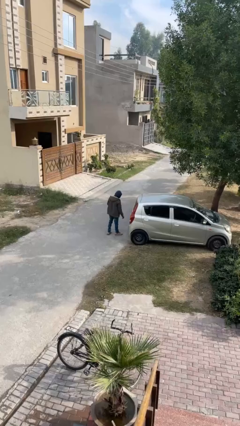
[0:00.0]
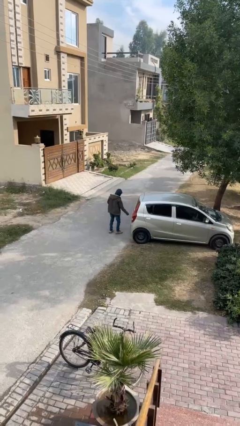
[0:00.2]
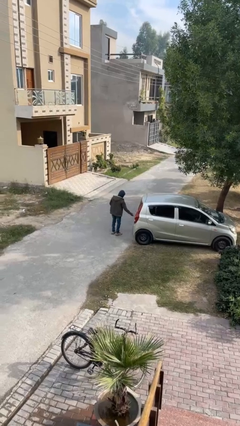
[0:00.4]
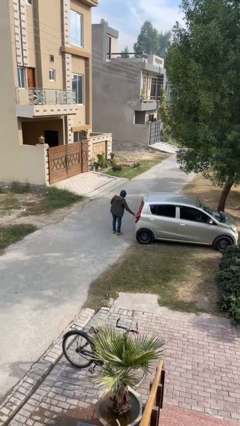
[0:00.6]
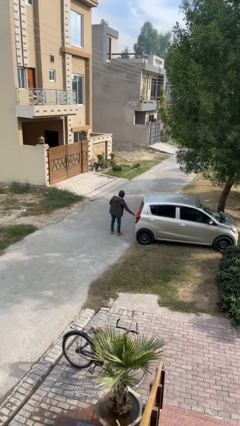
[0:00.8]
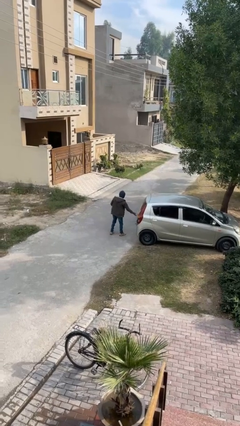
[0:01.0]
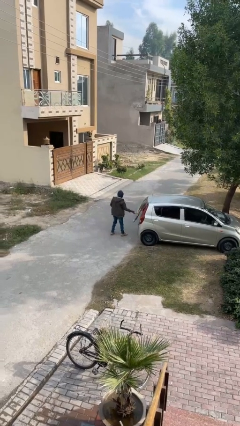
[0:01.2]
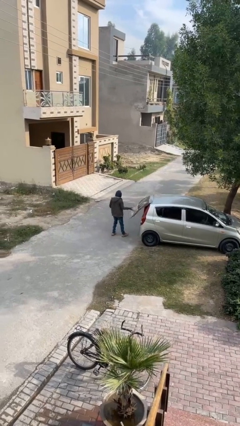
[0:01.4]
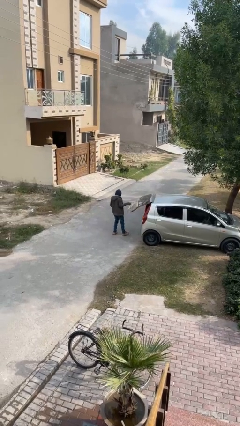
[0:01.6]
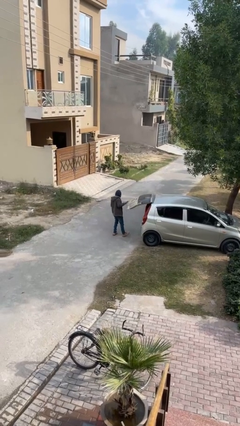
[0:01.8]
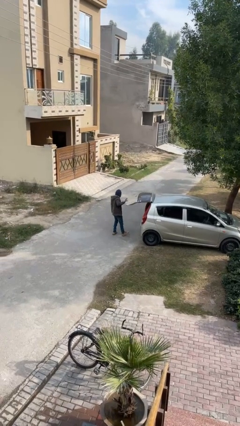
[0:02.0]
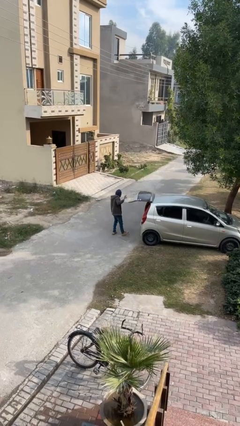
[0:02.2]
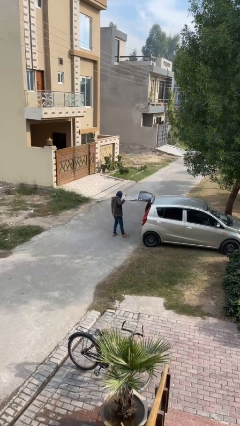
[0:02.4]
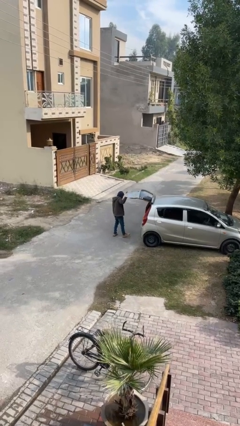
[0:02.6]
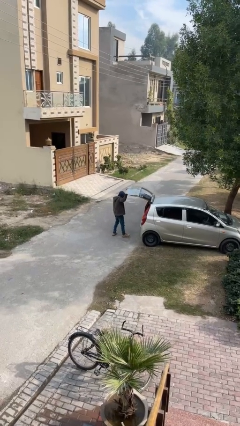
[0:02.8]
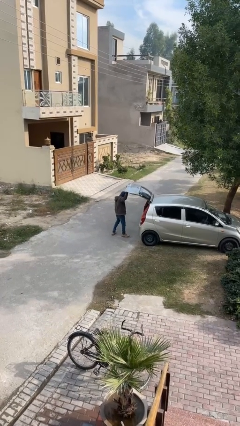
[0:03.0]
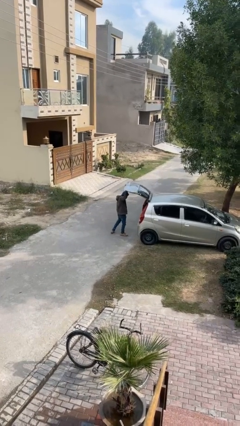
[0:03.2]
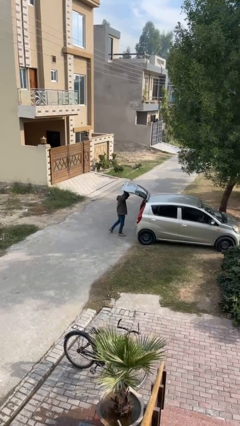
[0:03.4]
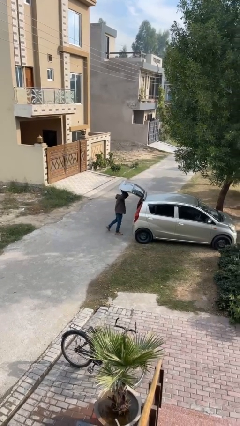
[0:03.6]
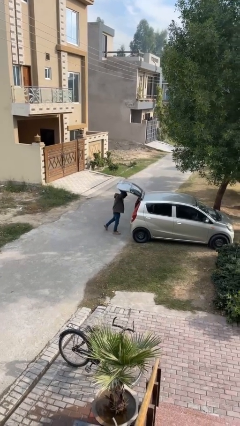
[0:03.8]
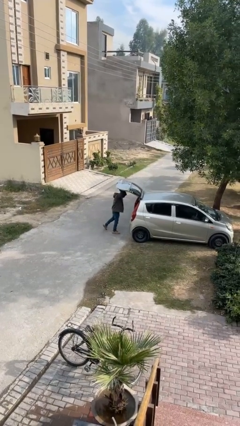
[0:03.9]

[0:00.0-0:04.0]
person opens car trunk

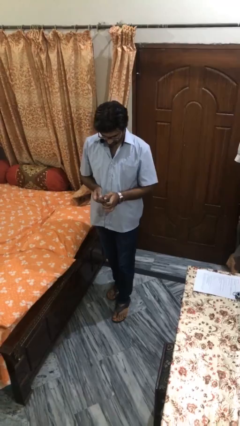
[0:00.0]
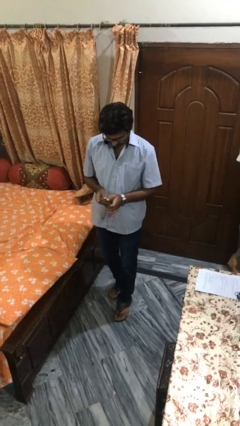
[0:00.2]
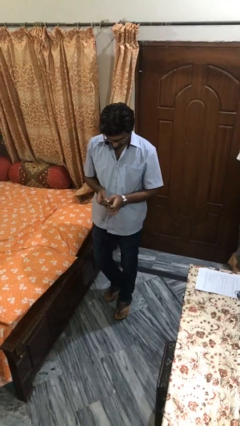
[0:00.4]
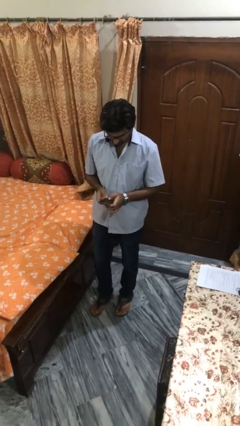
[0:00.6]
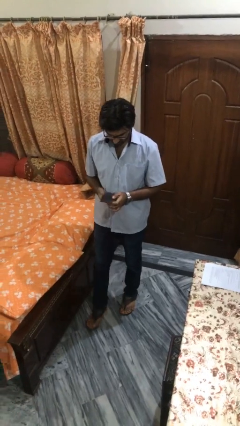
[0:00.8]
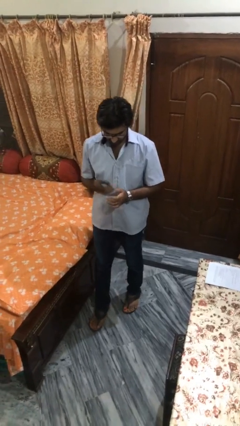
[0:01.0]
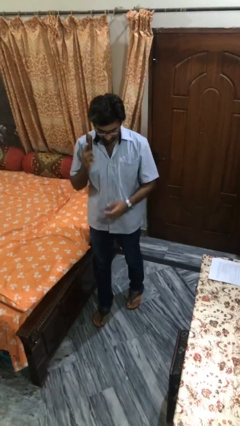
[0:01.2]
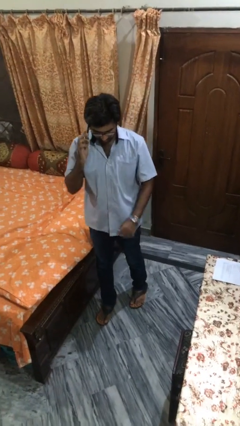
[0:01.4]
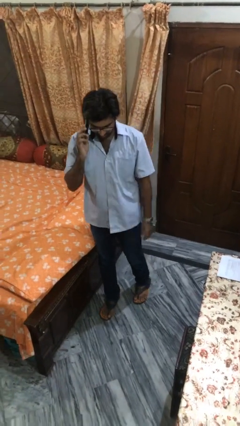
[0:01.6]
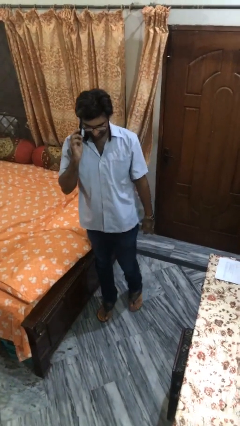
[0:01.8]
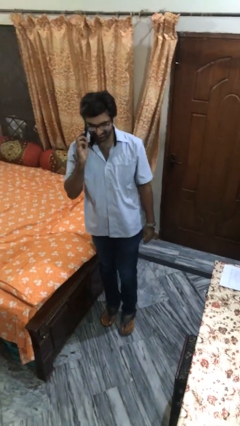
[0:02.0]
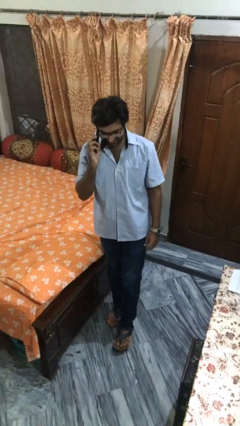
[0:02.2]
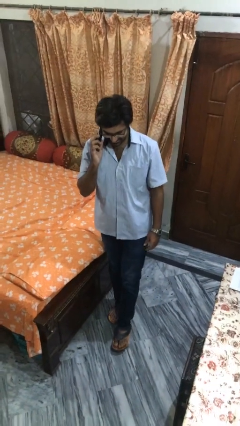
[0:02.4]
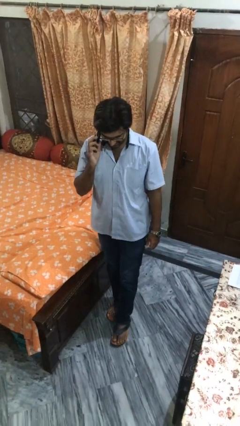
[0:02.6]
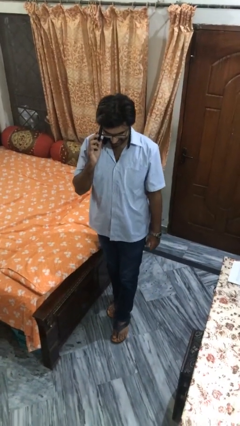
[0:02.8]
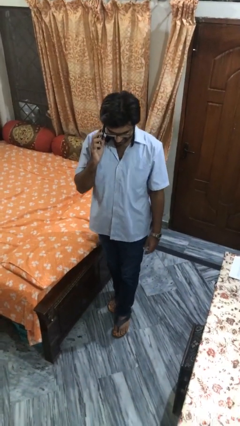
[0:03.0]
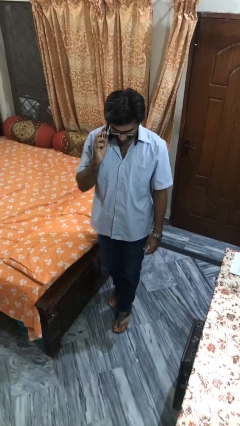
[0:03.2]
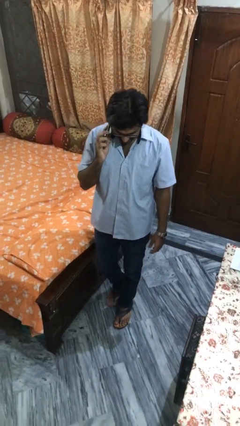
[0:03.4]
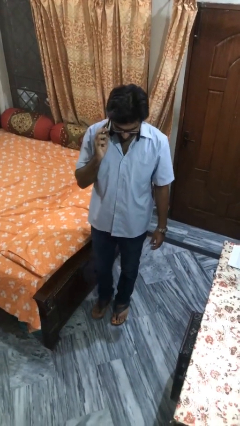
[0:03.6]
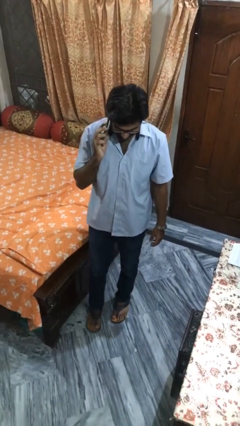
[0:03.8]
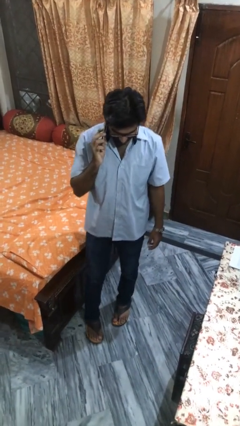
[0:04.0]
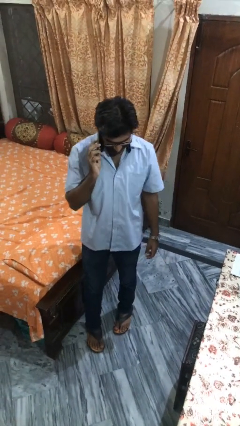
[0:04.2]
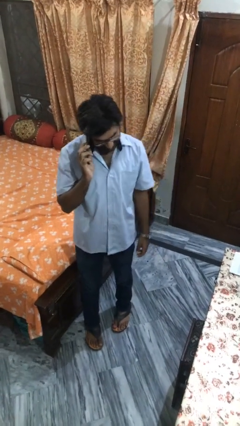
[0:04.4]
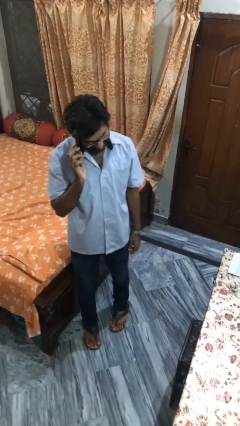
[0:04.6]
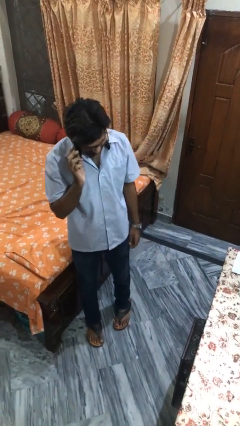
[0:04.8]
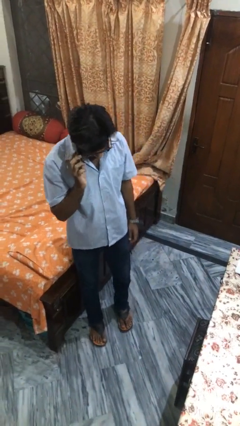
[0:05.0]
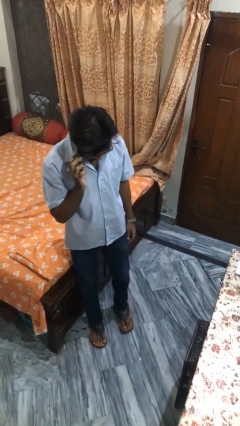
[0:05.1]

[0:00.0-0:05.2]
person talks on phone

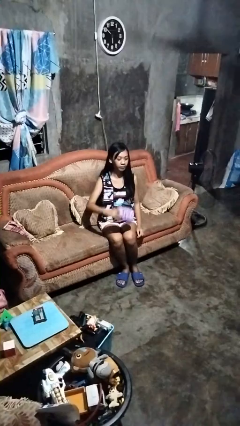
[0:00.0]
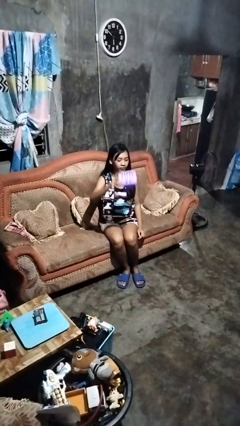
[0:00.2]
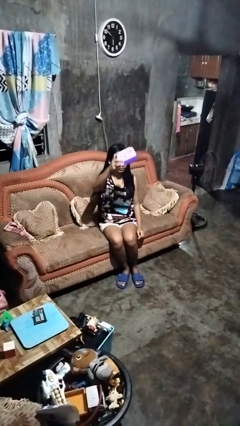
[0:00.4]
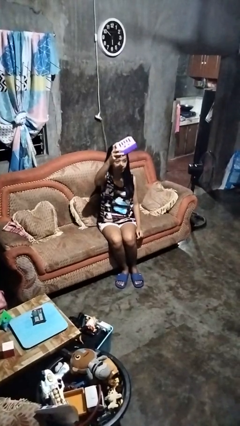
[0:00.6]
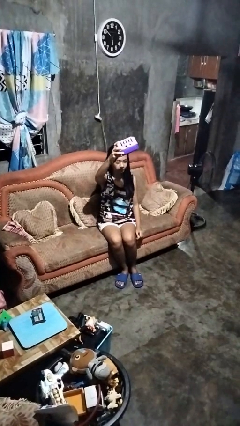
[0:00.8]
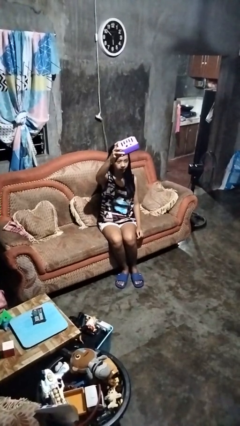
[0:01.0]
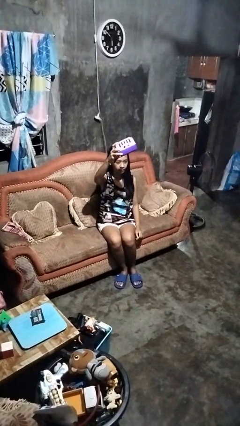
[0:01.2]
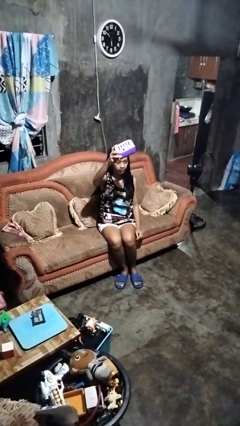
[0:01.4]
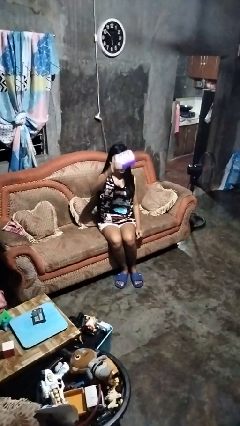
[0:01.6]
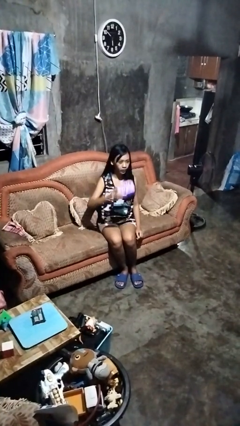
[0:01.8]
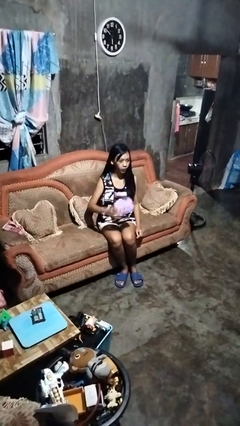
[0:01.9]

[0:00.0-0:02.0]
person holds object above head

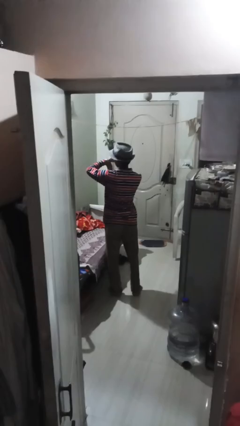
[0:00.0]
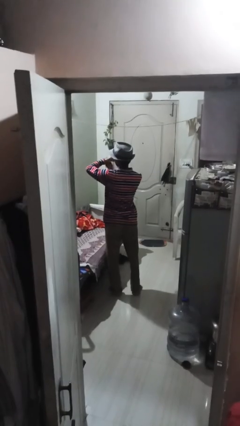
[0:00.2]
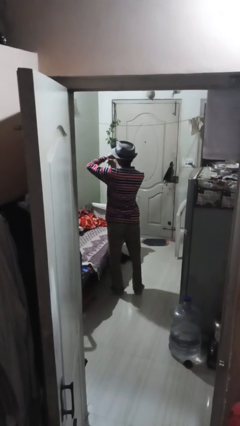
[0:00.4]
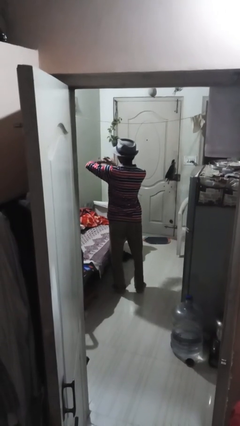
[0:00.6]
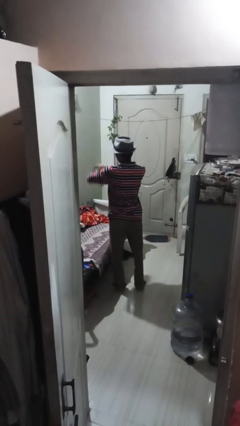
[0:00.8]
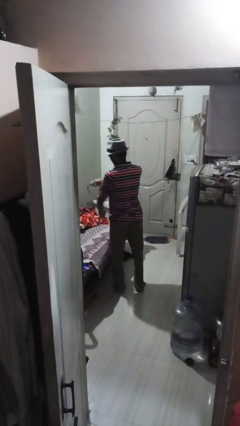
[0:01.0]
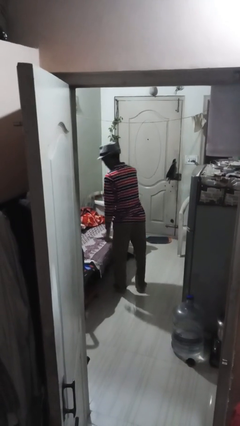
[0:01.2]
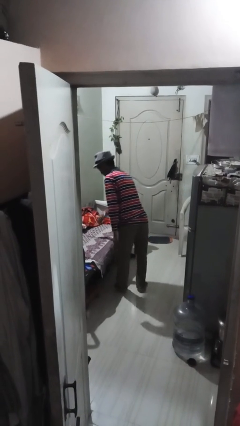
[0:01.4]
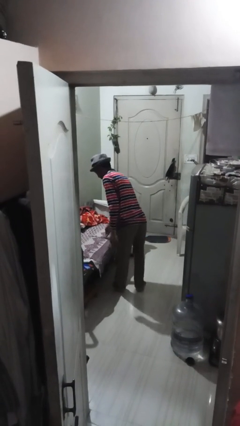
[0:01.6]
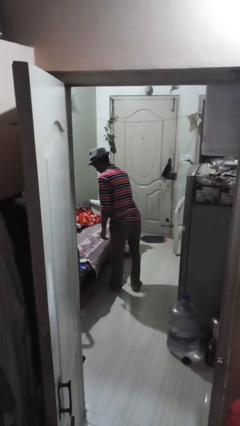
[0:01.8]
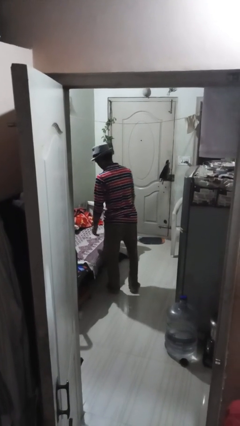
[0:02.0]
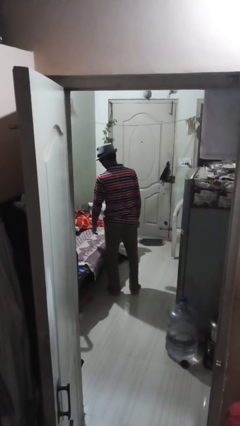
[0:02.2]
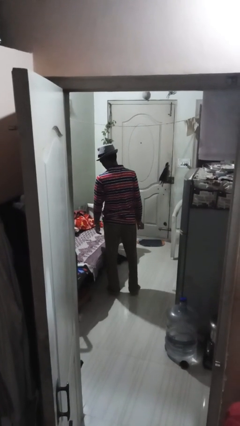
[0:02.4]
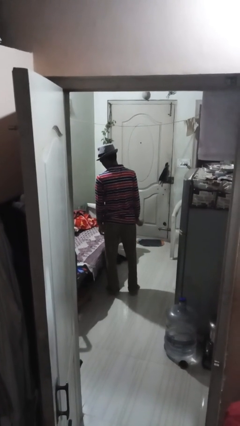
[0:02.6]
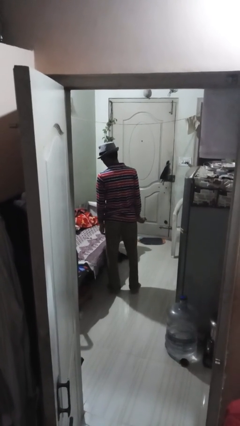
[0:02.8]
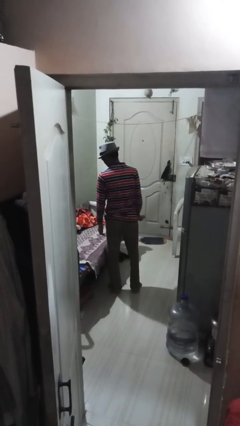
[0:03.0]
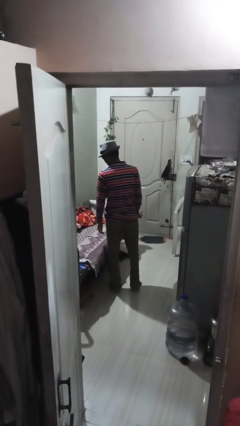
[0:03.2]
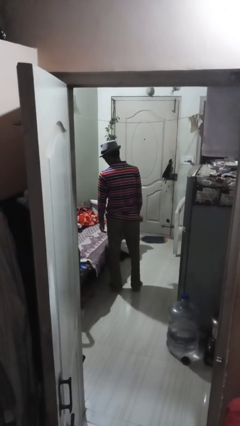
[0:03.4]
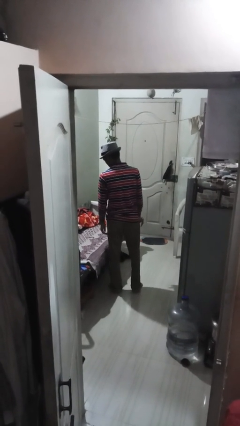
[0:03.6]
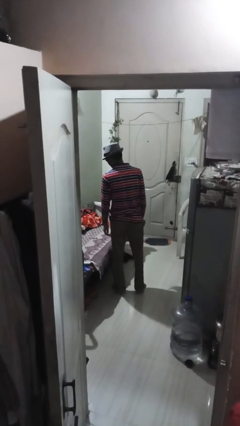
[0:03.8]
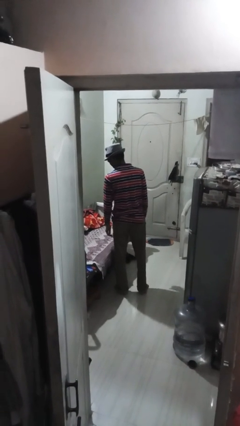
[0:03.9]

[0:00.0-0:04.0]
person takes off wristwatch

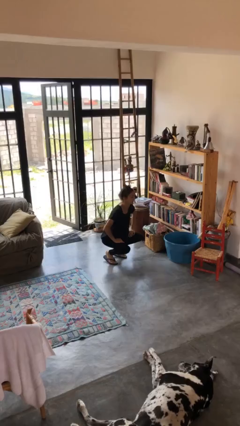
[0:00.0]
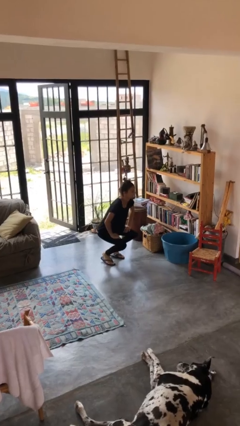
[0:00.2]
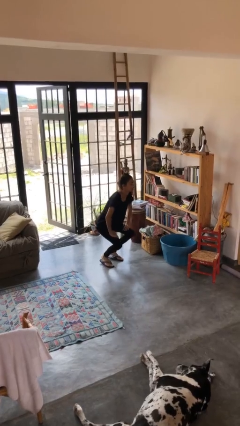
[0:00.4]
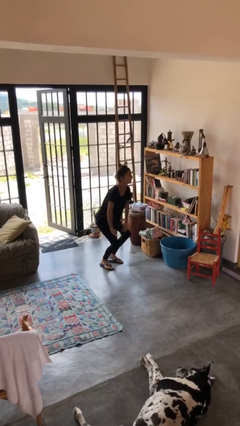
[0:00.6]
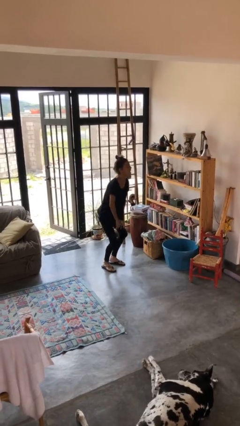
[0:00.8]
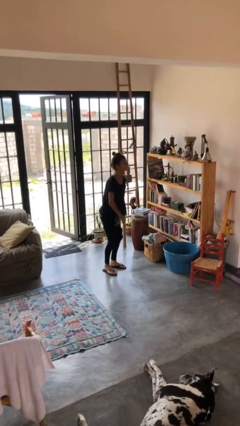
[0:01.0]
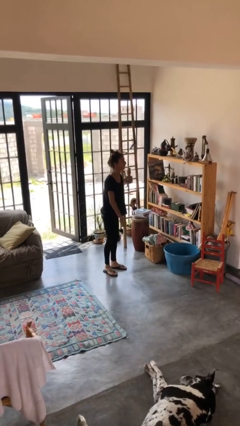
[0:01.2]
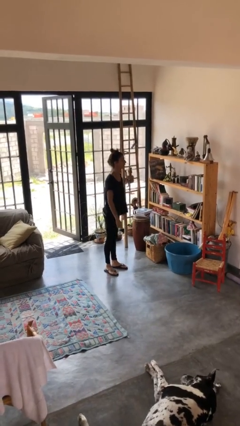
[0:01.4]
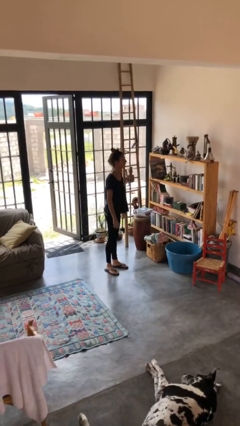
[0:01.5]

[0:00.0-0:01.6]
person stands up

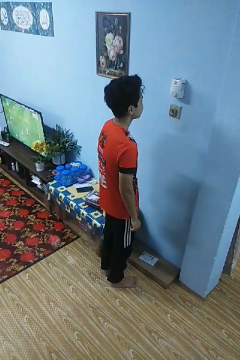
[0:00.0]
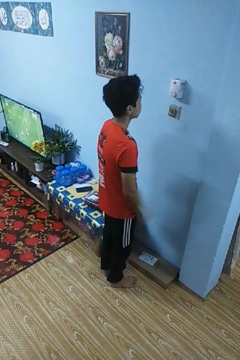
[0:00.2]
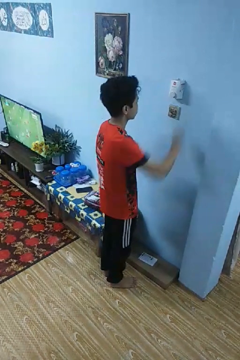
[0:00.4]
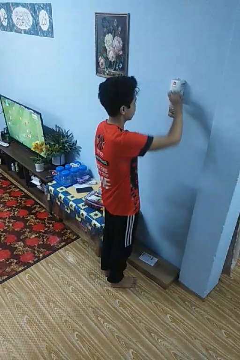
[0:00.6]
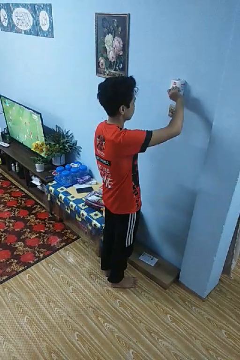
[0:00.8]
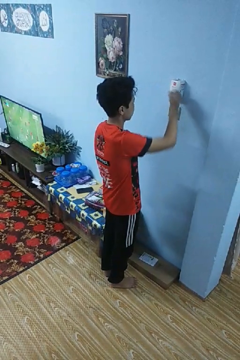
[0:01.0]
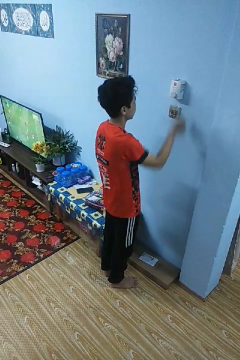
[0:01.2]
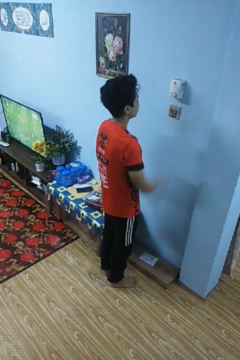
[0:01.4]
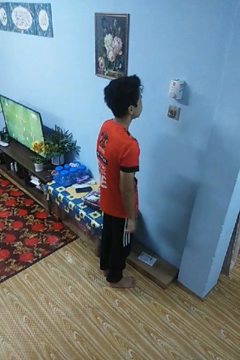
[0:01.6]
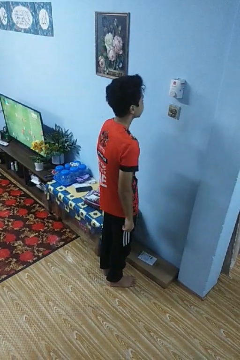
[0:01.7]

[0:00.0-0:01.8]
person adjusts thermostat
